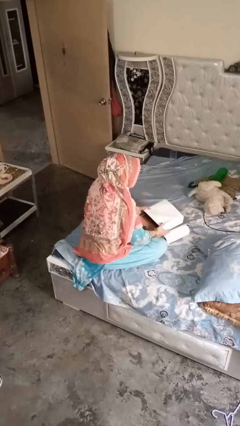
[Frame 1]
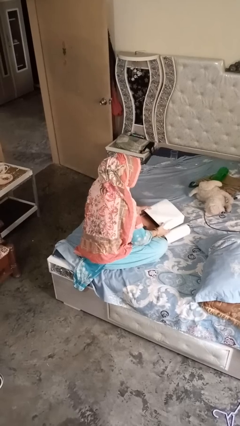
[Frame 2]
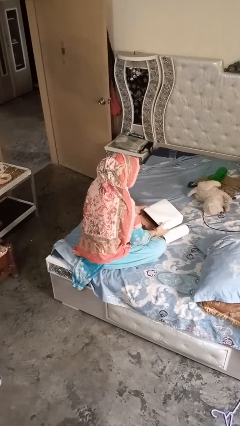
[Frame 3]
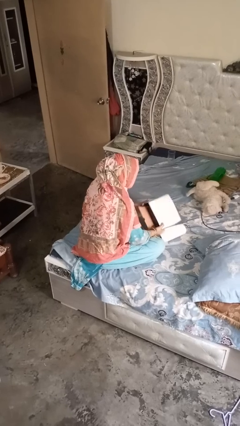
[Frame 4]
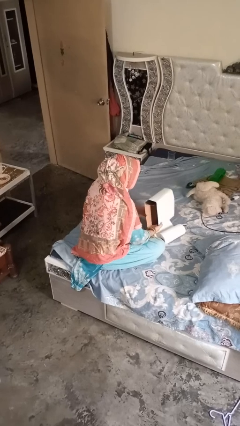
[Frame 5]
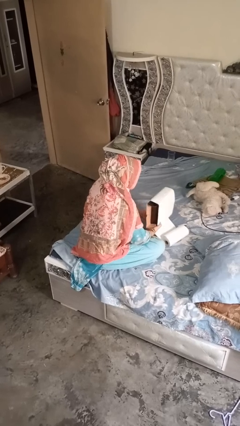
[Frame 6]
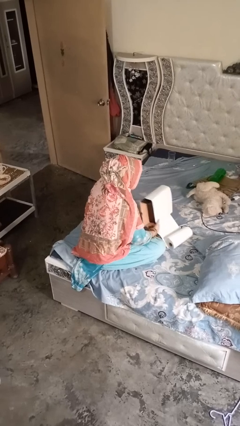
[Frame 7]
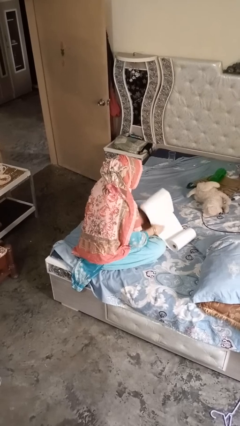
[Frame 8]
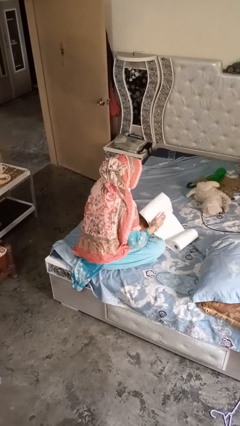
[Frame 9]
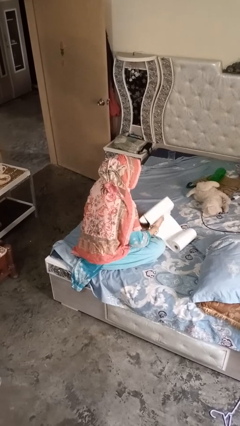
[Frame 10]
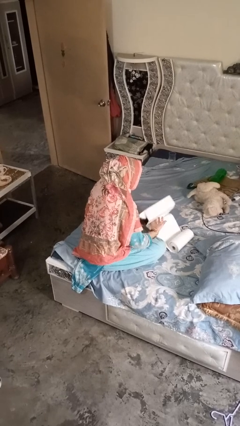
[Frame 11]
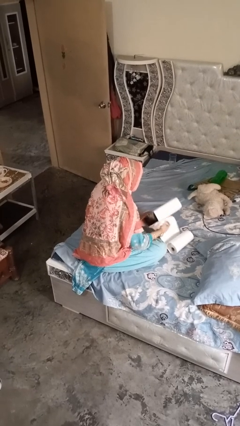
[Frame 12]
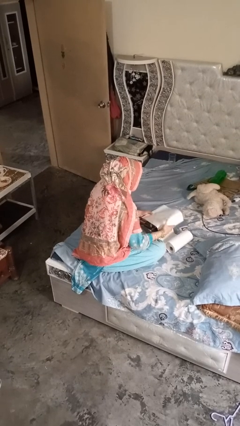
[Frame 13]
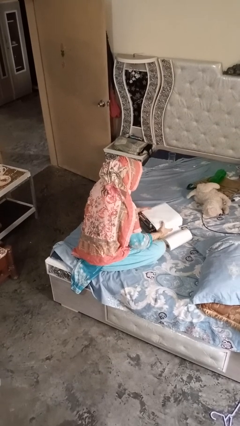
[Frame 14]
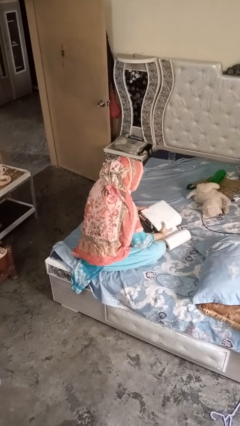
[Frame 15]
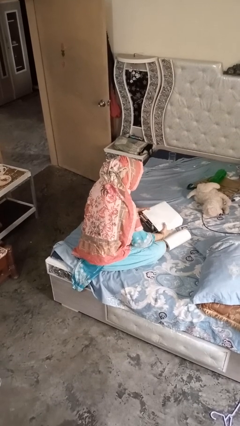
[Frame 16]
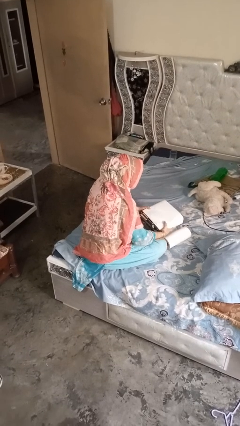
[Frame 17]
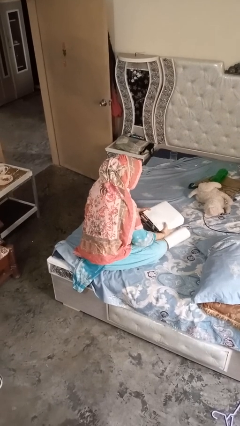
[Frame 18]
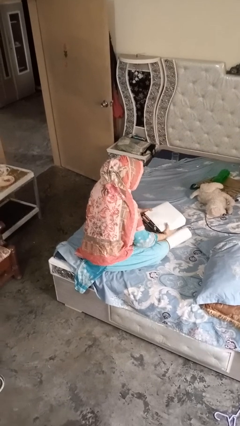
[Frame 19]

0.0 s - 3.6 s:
person wraps box

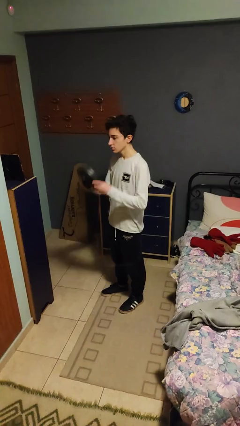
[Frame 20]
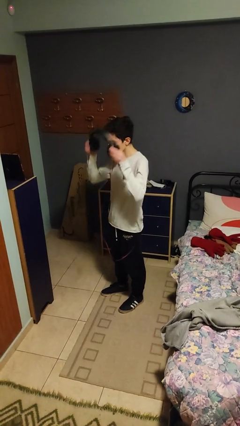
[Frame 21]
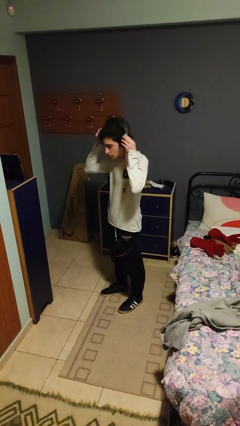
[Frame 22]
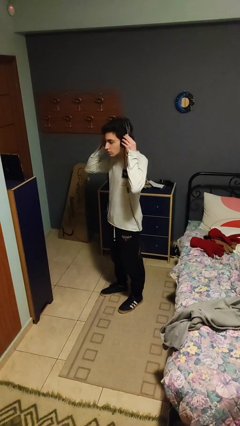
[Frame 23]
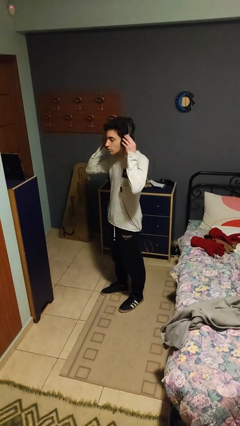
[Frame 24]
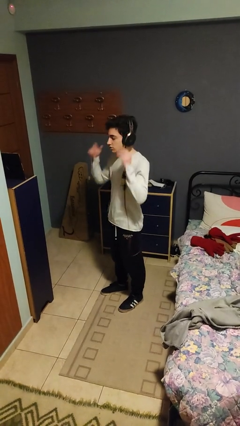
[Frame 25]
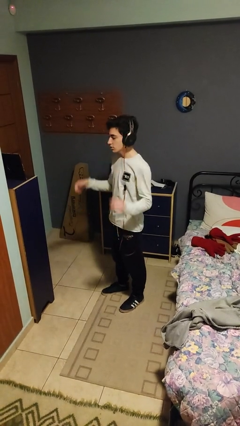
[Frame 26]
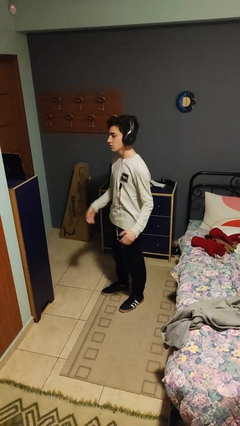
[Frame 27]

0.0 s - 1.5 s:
person puts on headphones

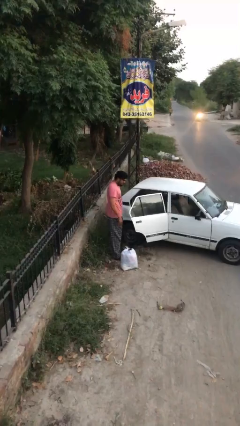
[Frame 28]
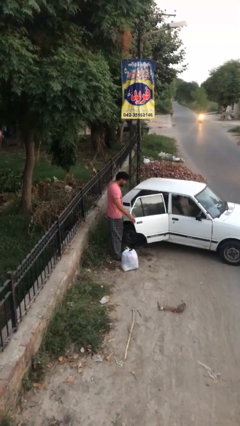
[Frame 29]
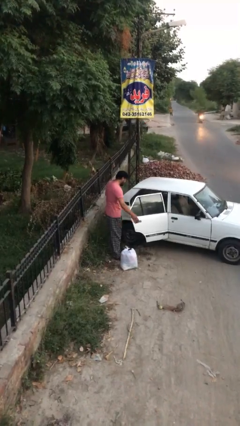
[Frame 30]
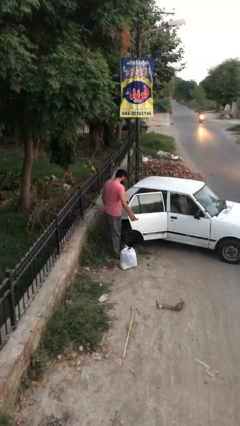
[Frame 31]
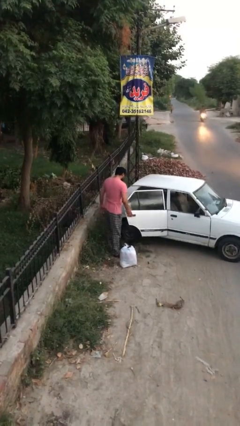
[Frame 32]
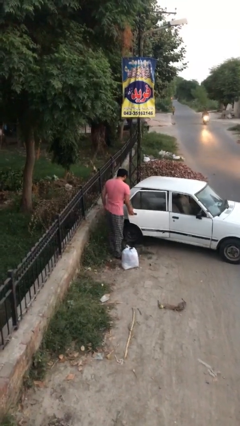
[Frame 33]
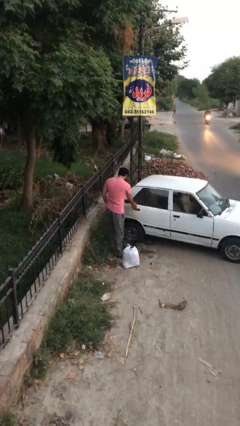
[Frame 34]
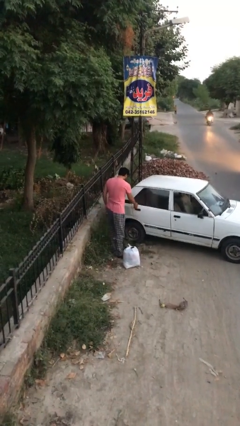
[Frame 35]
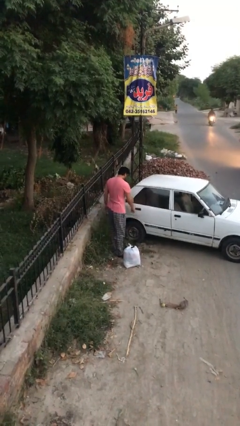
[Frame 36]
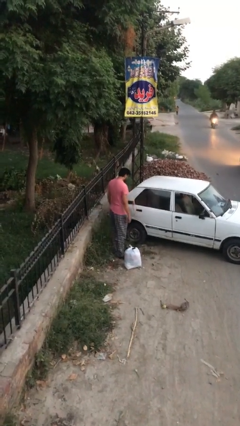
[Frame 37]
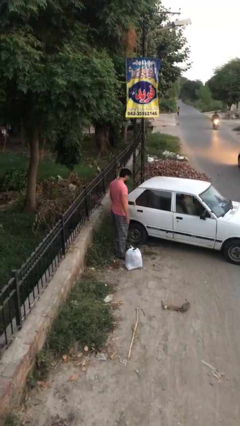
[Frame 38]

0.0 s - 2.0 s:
person closes car door

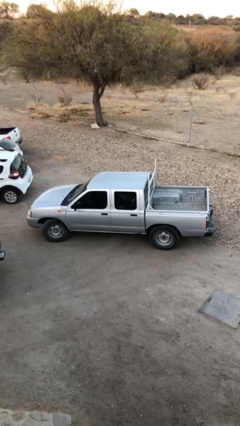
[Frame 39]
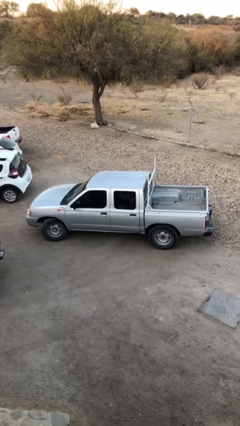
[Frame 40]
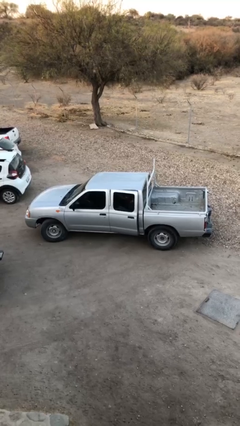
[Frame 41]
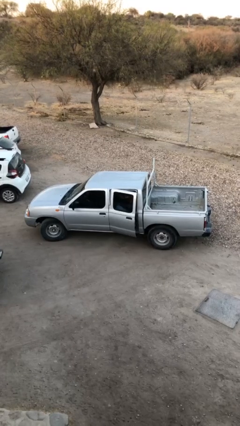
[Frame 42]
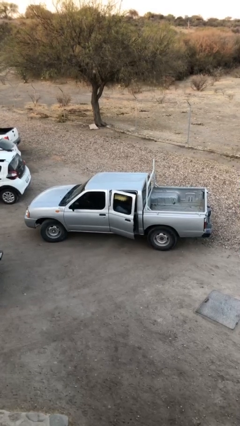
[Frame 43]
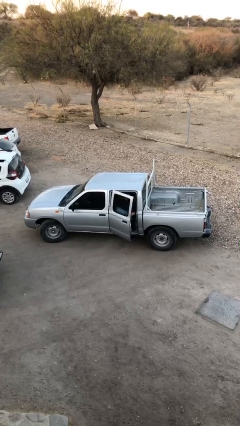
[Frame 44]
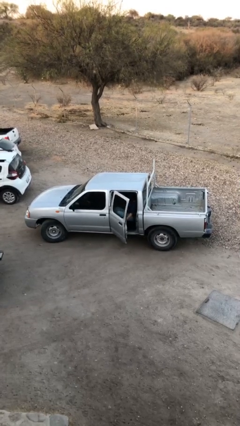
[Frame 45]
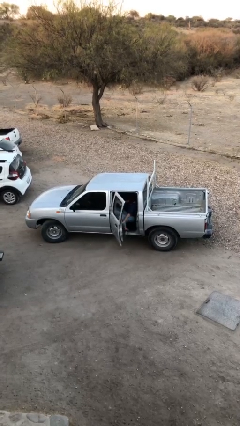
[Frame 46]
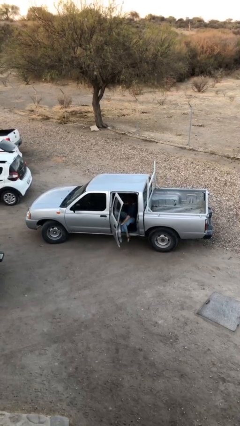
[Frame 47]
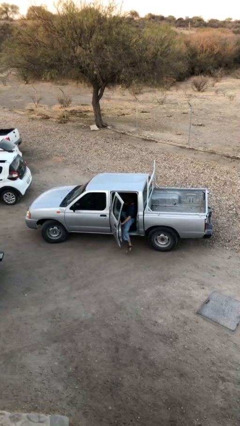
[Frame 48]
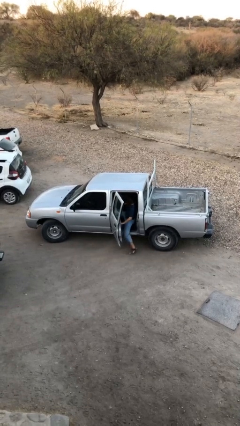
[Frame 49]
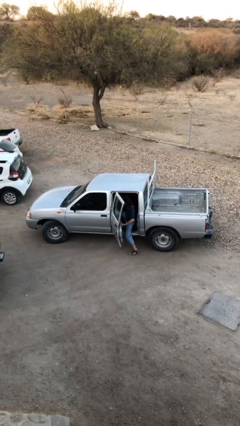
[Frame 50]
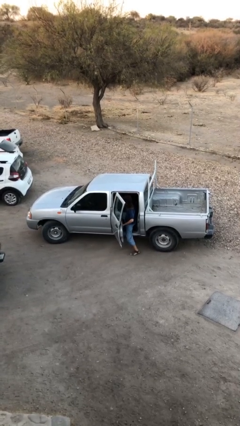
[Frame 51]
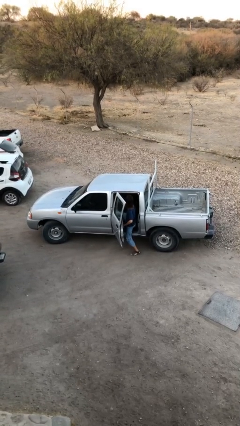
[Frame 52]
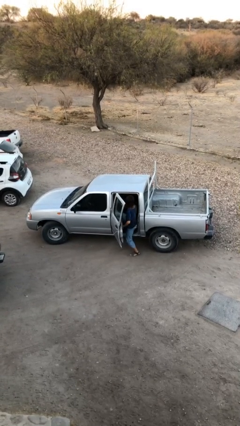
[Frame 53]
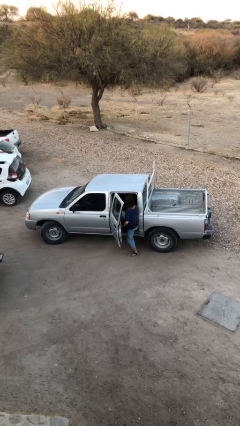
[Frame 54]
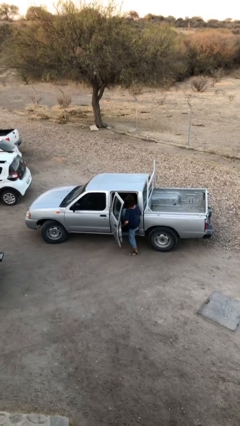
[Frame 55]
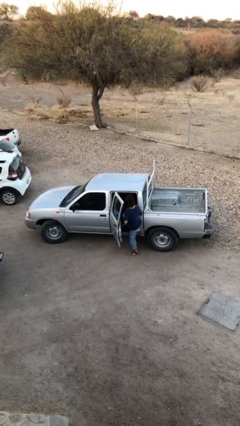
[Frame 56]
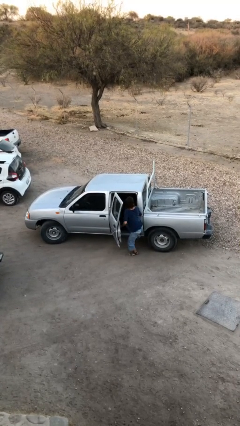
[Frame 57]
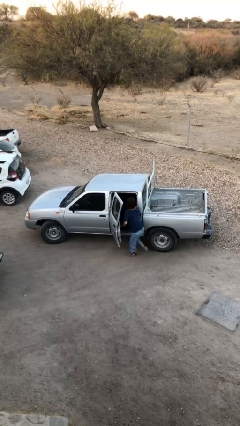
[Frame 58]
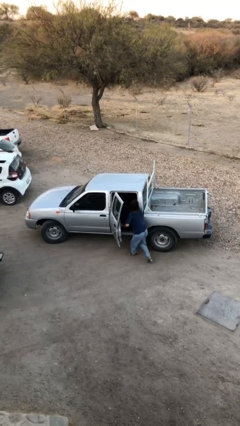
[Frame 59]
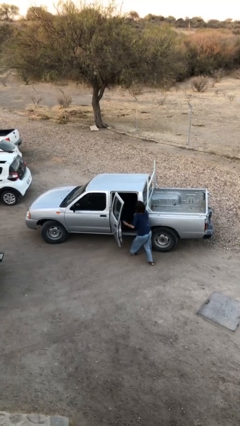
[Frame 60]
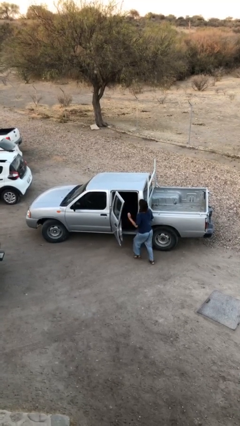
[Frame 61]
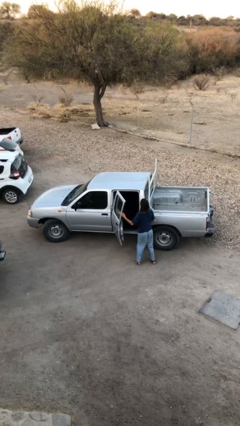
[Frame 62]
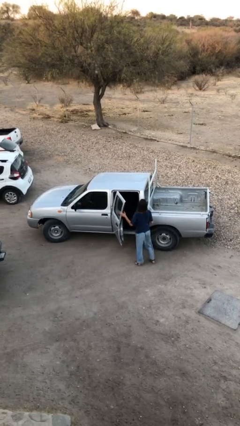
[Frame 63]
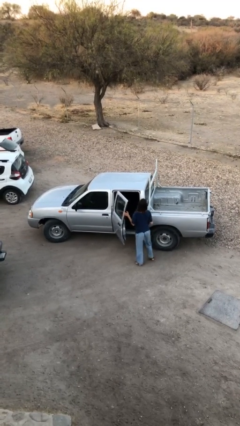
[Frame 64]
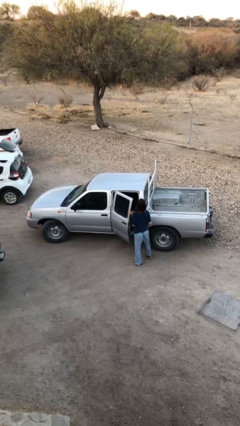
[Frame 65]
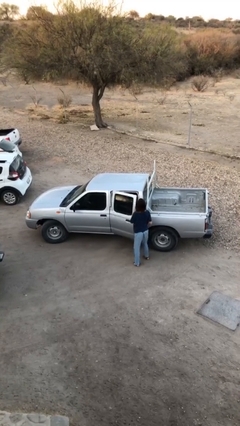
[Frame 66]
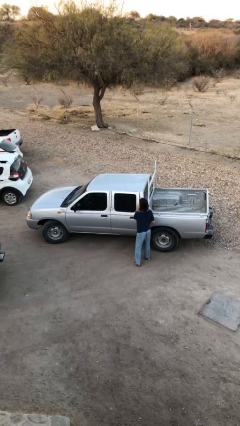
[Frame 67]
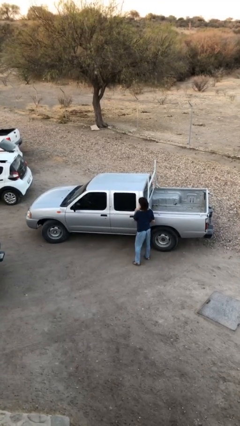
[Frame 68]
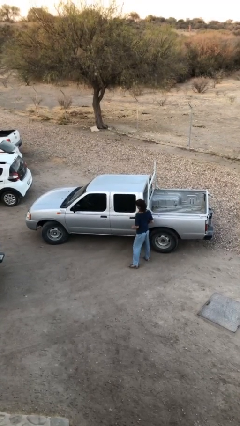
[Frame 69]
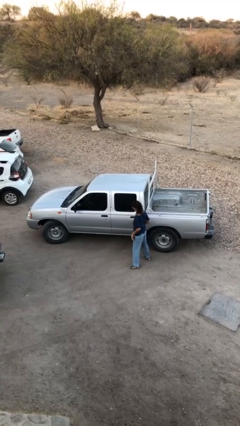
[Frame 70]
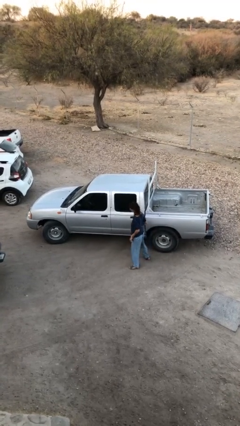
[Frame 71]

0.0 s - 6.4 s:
car drops off person

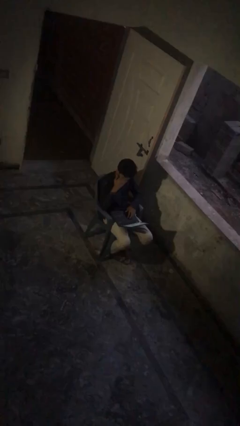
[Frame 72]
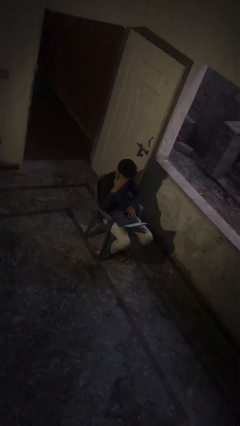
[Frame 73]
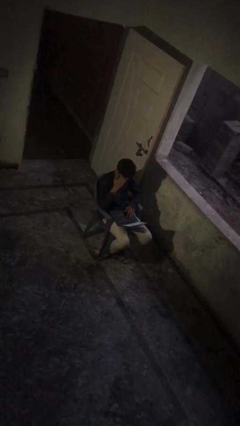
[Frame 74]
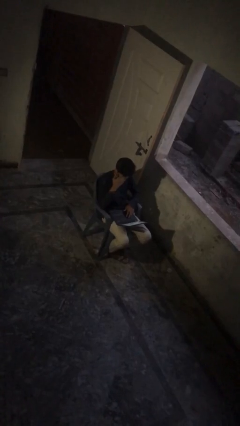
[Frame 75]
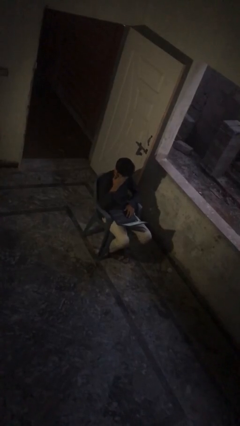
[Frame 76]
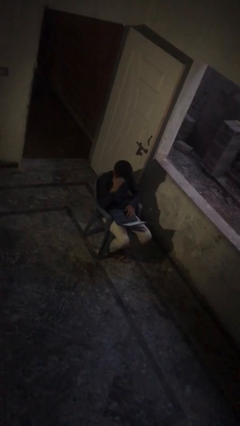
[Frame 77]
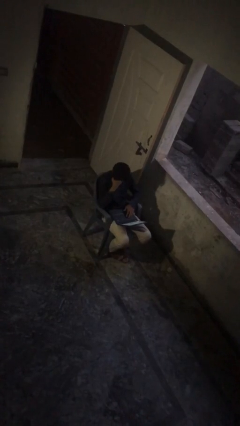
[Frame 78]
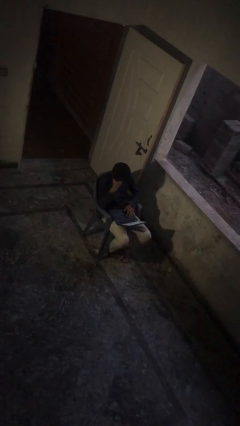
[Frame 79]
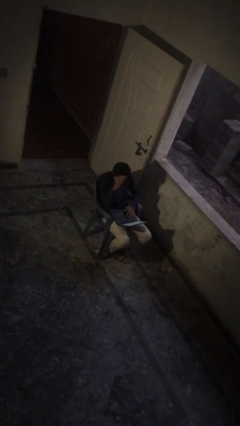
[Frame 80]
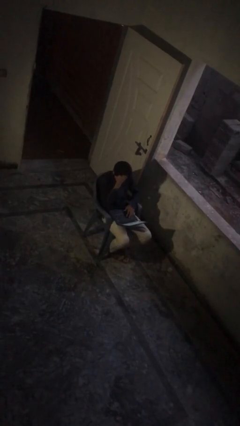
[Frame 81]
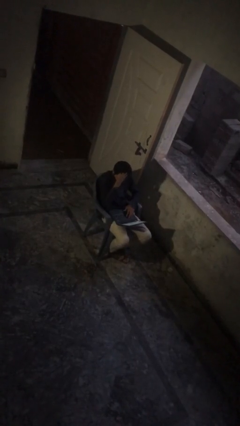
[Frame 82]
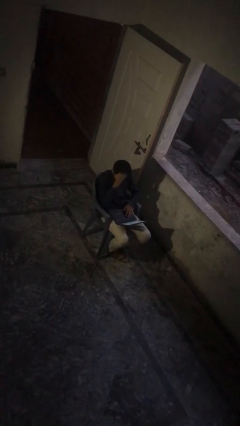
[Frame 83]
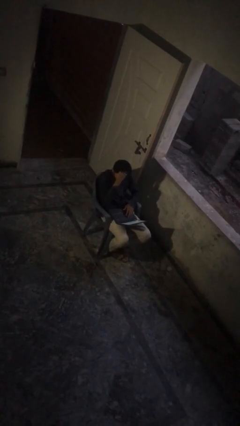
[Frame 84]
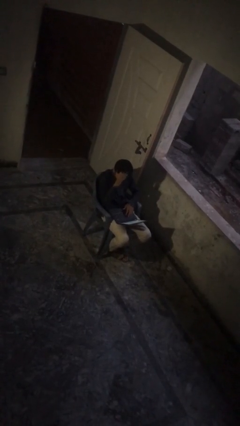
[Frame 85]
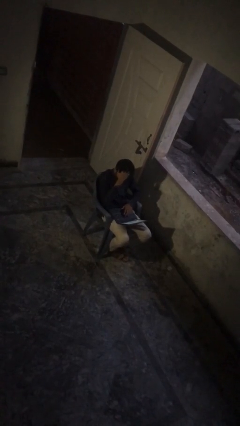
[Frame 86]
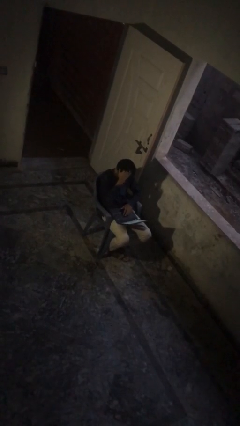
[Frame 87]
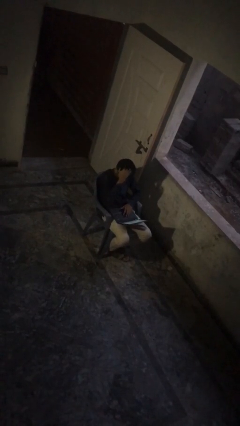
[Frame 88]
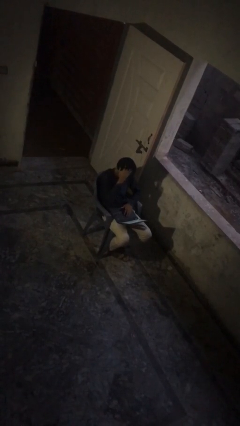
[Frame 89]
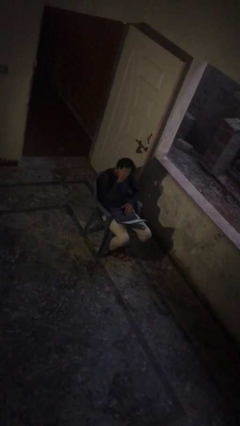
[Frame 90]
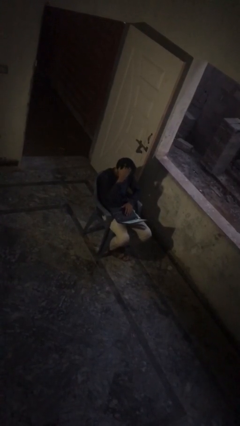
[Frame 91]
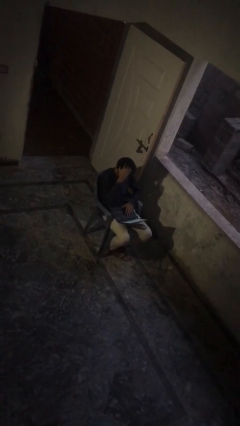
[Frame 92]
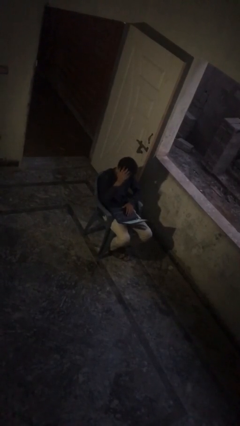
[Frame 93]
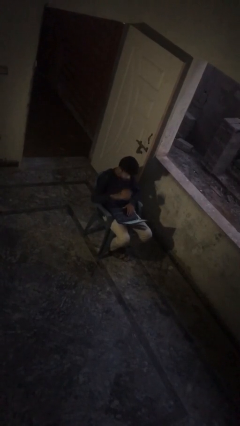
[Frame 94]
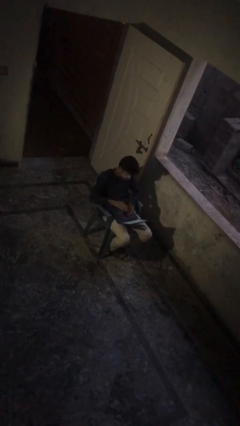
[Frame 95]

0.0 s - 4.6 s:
person interacts with laptop
